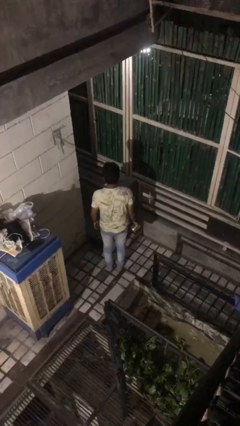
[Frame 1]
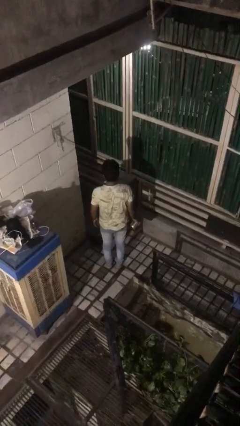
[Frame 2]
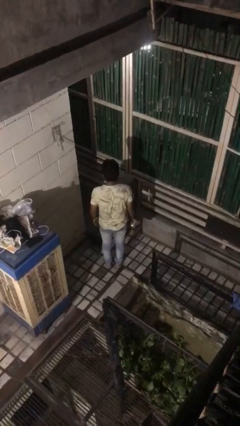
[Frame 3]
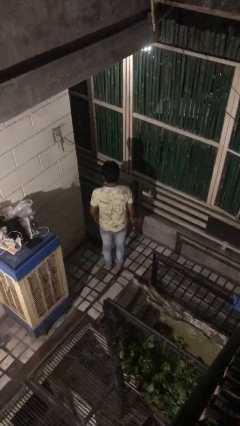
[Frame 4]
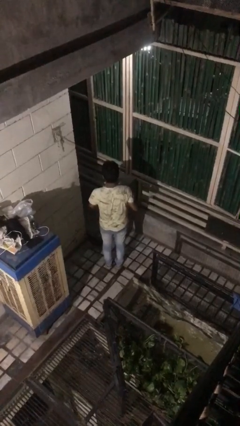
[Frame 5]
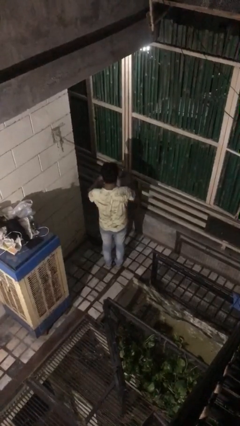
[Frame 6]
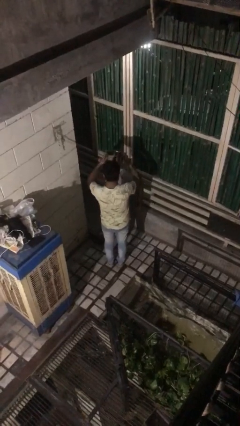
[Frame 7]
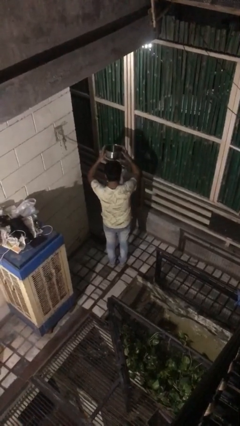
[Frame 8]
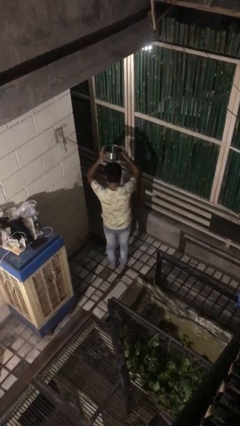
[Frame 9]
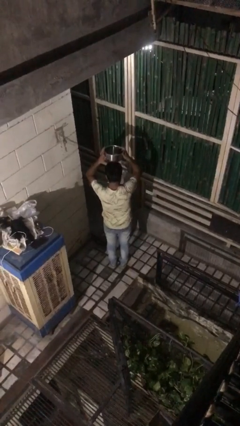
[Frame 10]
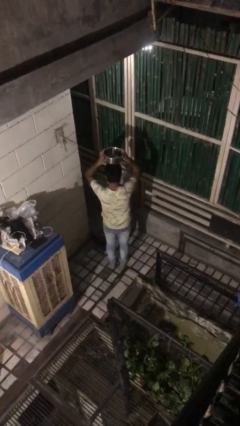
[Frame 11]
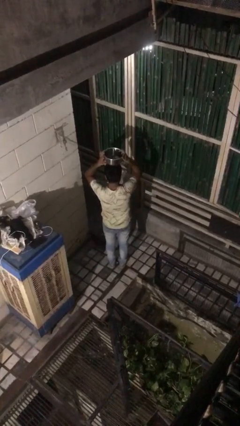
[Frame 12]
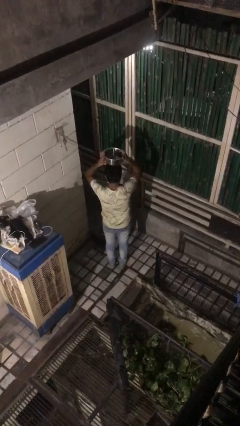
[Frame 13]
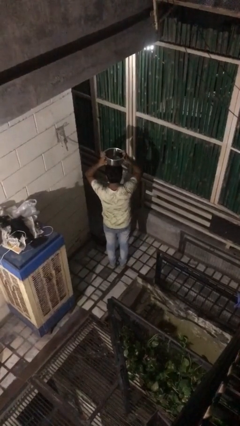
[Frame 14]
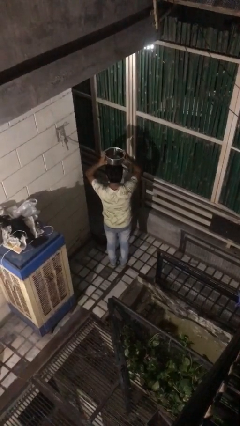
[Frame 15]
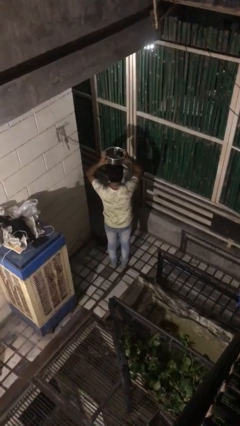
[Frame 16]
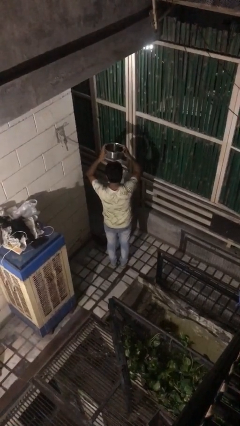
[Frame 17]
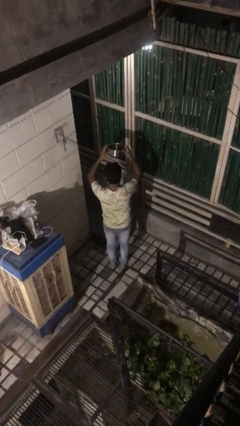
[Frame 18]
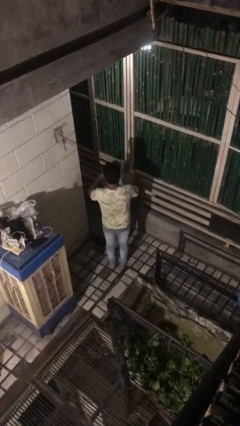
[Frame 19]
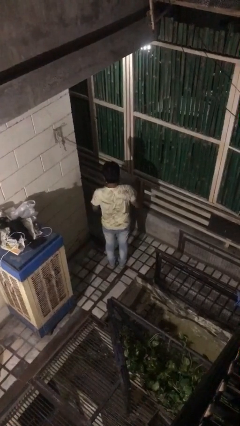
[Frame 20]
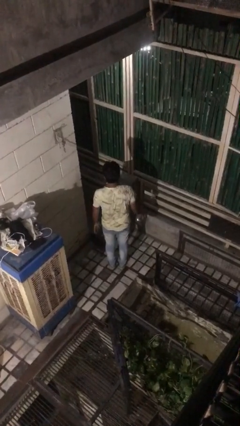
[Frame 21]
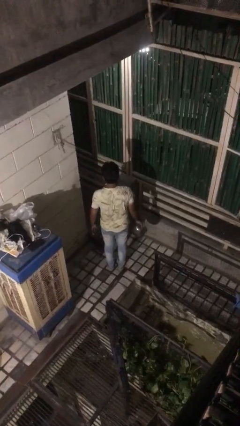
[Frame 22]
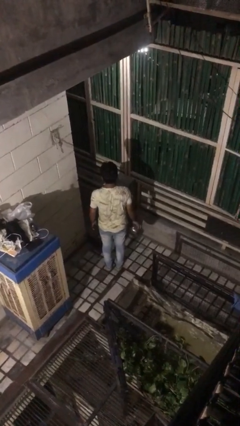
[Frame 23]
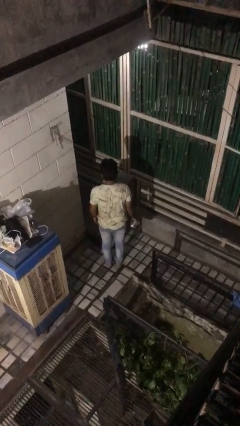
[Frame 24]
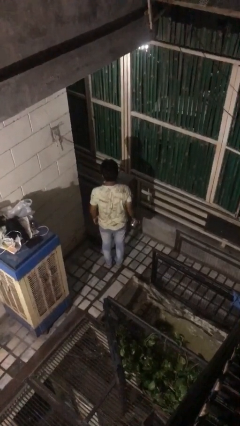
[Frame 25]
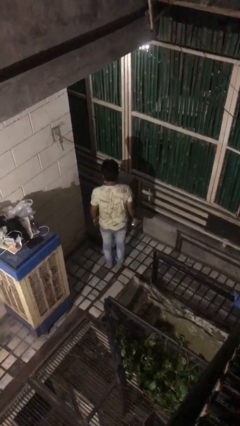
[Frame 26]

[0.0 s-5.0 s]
person holds object above head

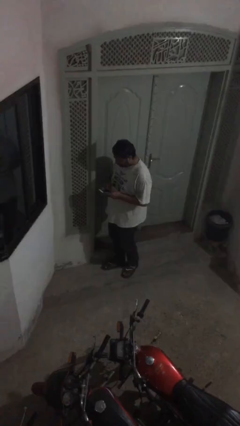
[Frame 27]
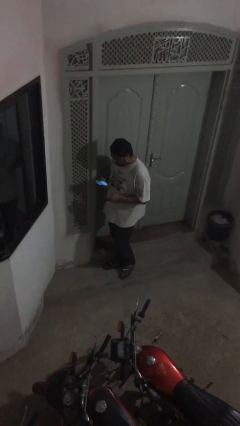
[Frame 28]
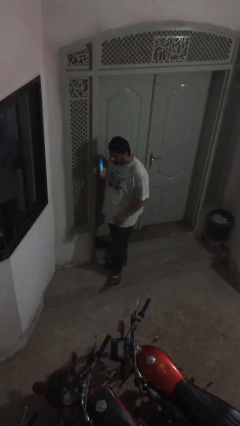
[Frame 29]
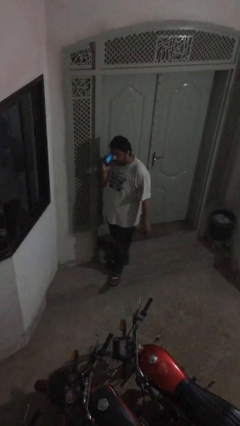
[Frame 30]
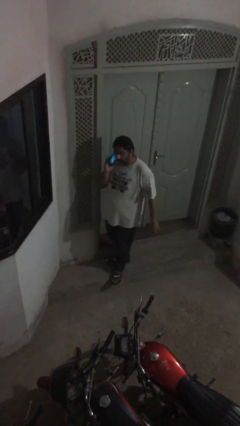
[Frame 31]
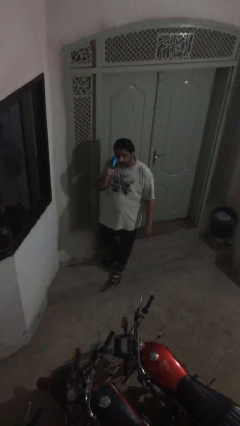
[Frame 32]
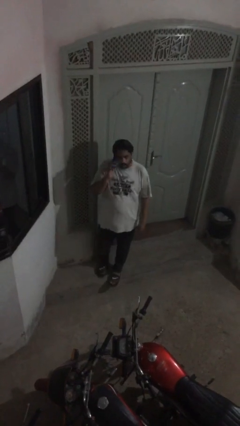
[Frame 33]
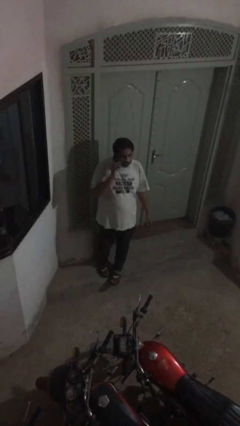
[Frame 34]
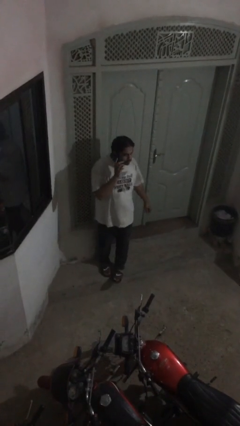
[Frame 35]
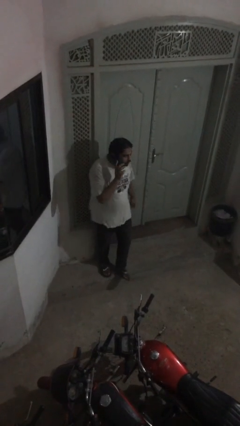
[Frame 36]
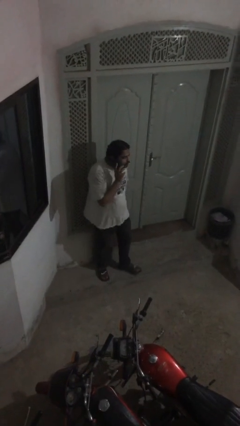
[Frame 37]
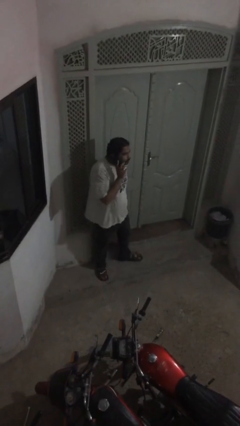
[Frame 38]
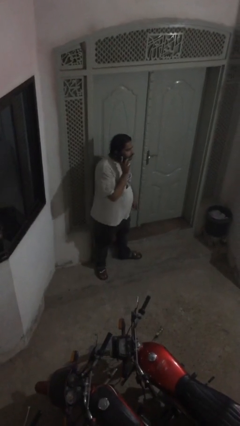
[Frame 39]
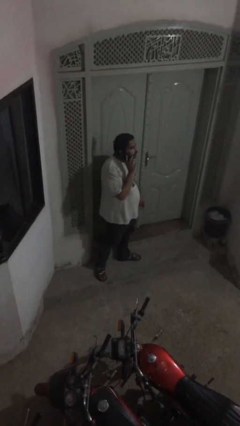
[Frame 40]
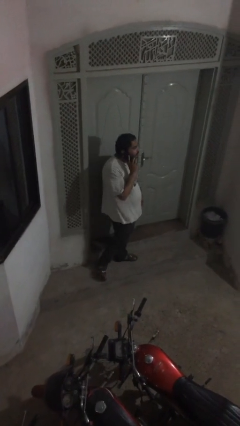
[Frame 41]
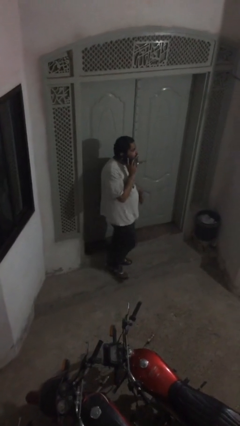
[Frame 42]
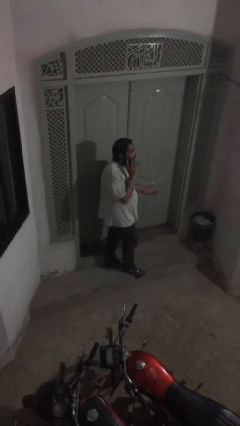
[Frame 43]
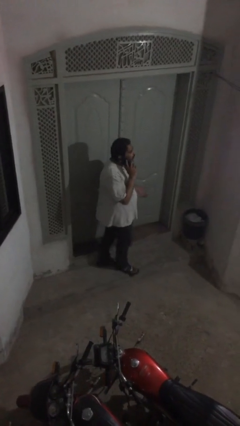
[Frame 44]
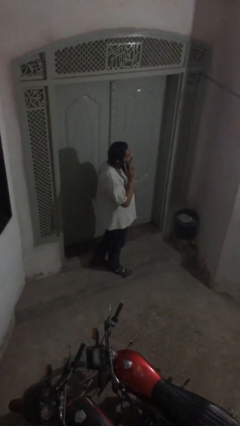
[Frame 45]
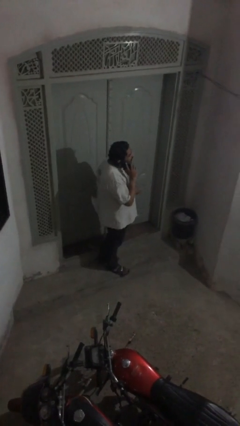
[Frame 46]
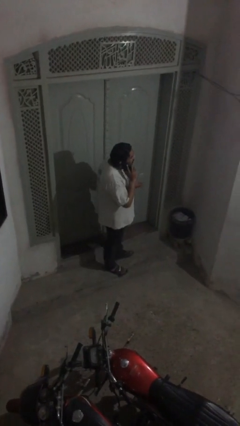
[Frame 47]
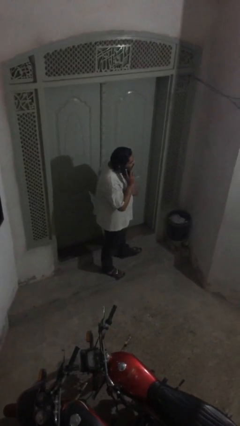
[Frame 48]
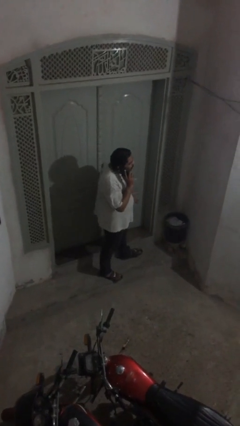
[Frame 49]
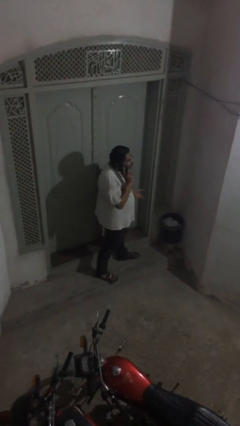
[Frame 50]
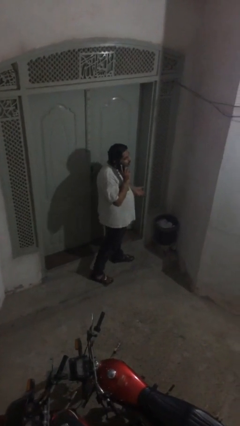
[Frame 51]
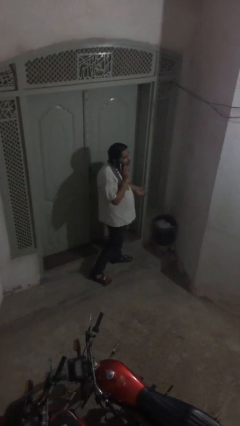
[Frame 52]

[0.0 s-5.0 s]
person talks on phone

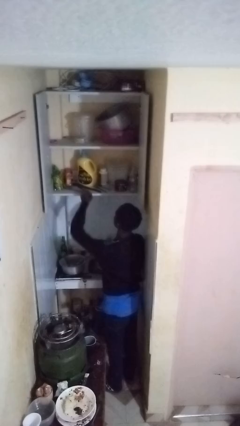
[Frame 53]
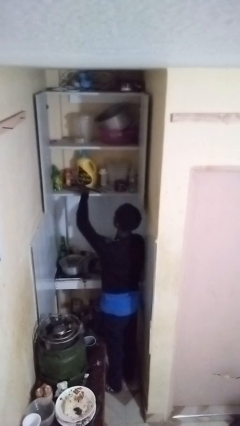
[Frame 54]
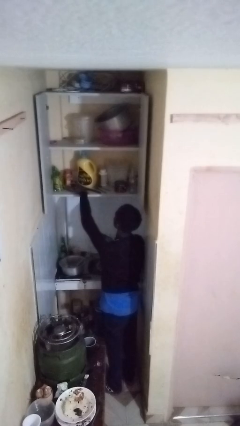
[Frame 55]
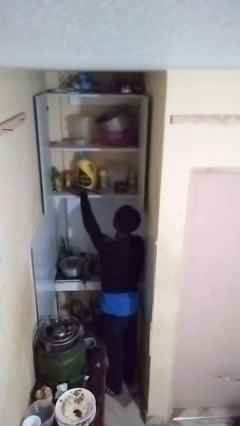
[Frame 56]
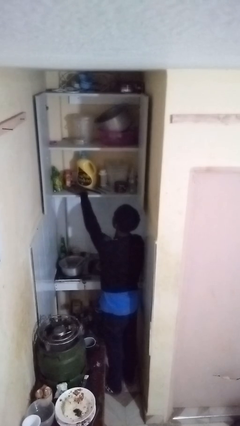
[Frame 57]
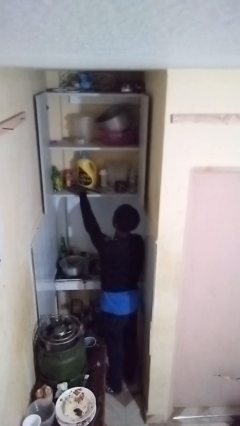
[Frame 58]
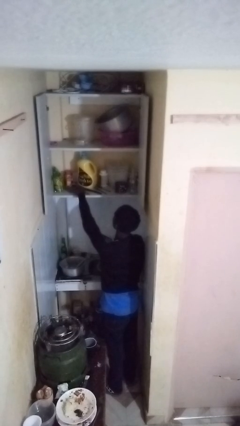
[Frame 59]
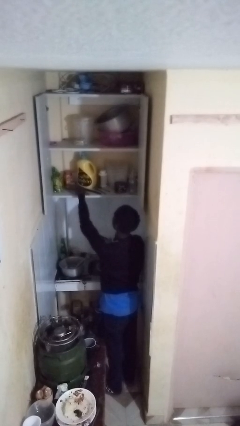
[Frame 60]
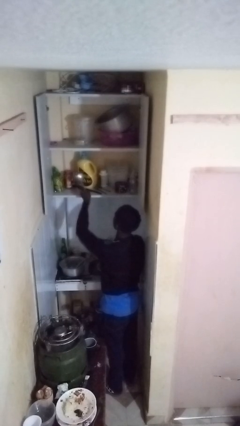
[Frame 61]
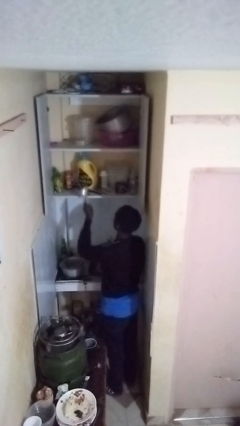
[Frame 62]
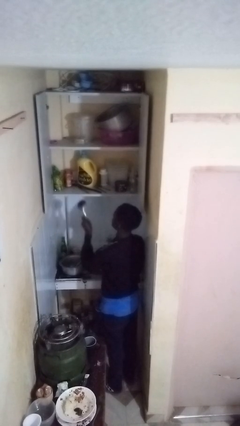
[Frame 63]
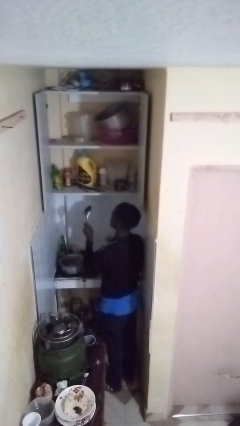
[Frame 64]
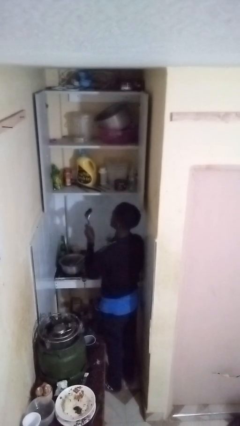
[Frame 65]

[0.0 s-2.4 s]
person takes object from kitchen drawer

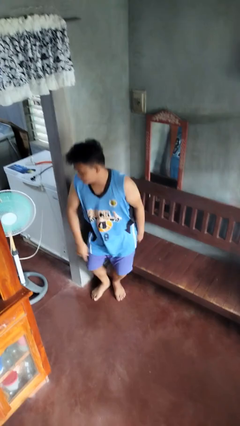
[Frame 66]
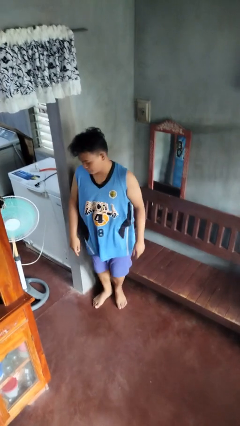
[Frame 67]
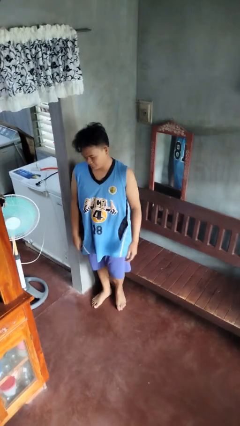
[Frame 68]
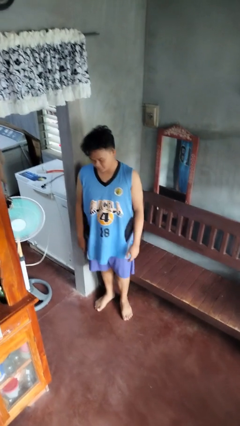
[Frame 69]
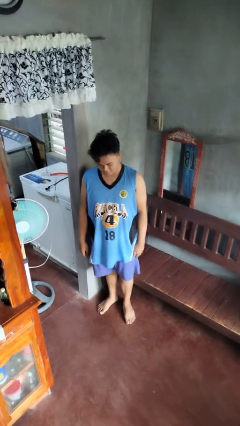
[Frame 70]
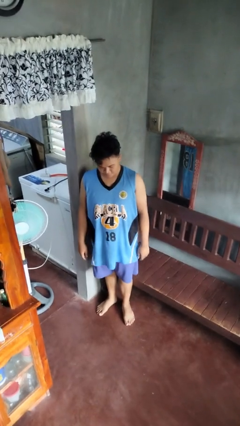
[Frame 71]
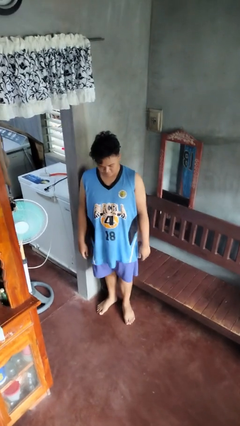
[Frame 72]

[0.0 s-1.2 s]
person stands up

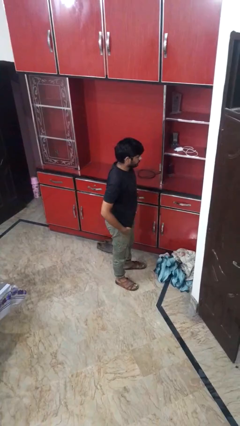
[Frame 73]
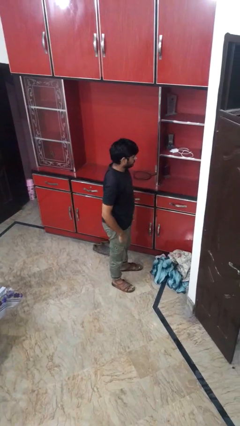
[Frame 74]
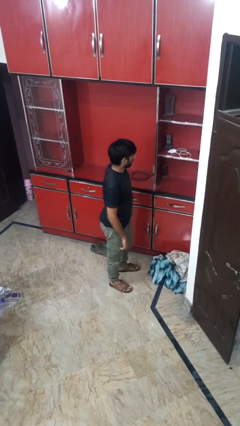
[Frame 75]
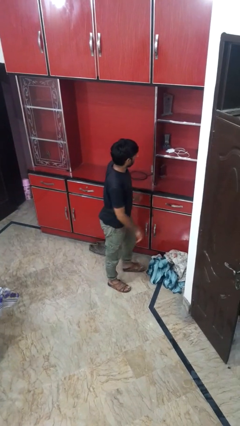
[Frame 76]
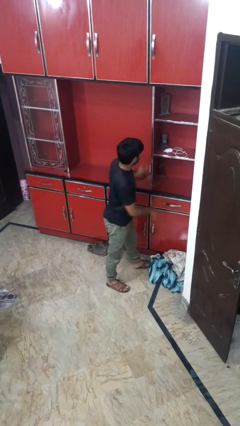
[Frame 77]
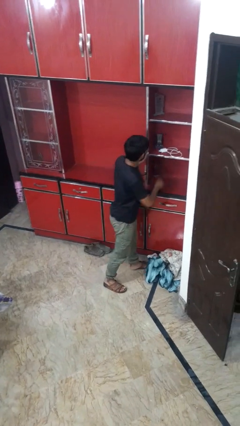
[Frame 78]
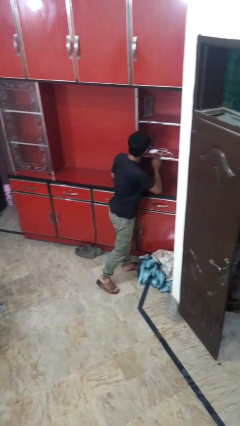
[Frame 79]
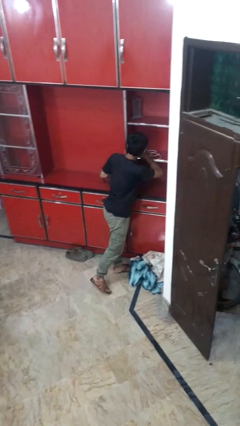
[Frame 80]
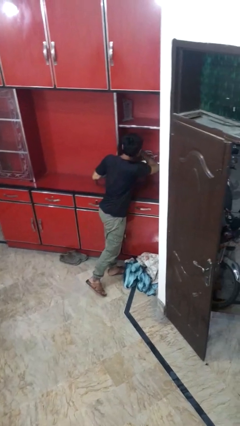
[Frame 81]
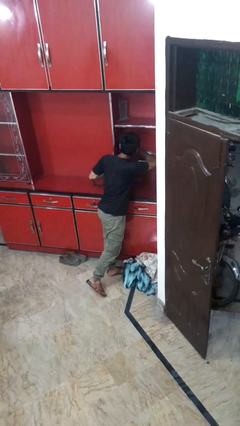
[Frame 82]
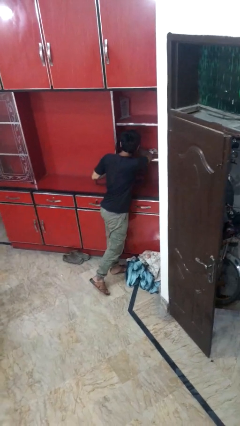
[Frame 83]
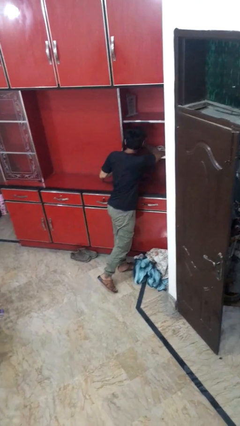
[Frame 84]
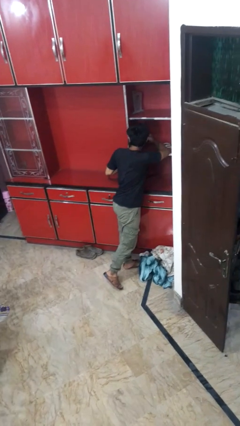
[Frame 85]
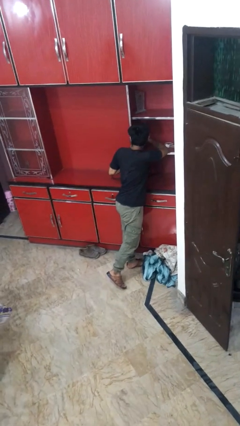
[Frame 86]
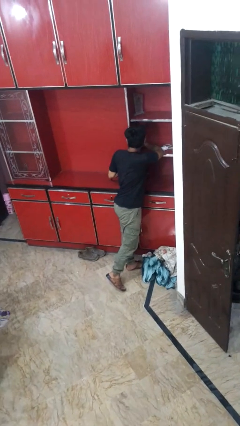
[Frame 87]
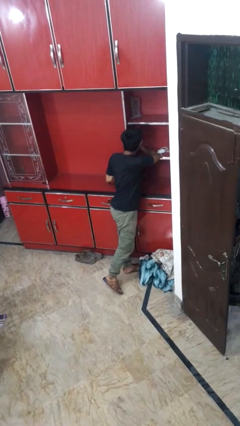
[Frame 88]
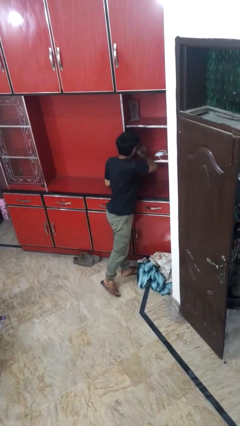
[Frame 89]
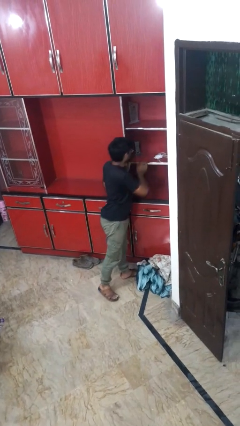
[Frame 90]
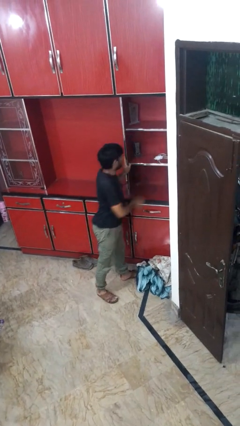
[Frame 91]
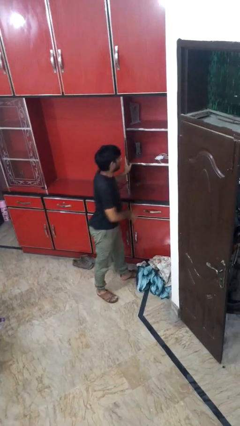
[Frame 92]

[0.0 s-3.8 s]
person searches in cabinet
